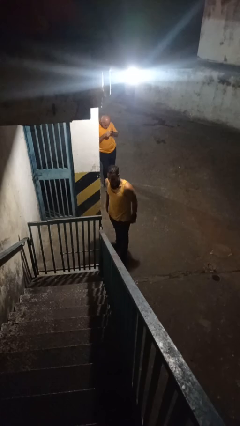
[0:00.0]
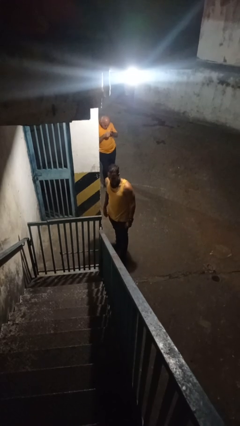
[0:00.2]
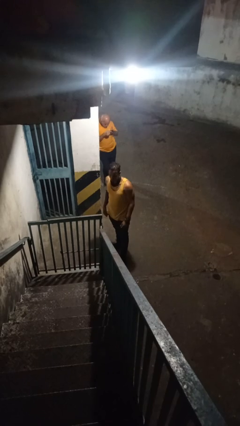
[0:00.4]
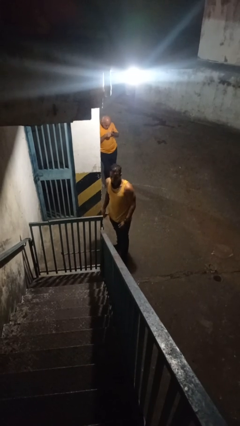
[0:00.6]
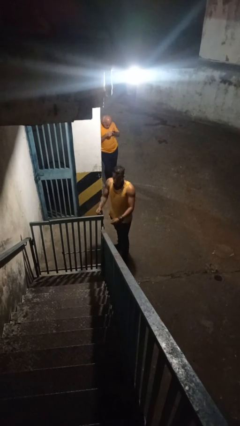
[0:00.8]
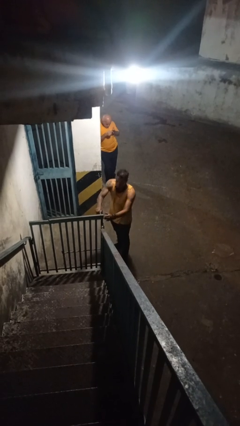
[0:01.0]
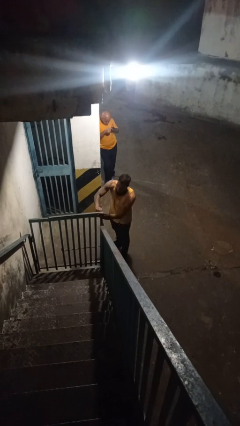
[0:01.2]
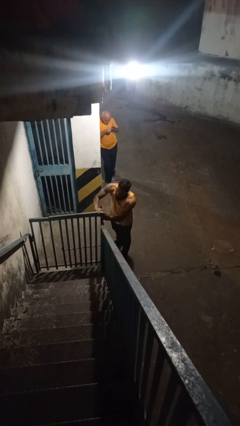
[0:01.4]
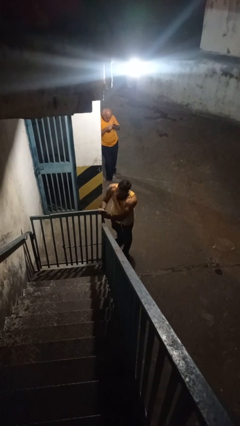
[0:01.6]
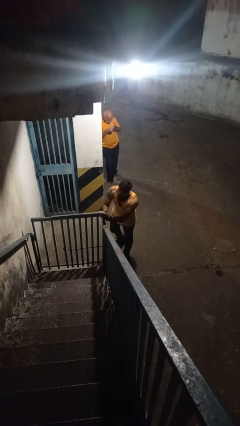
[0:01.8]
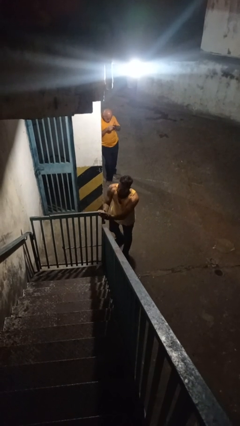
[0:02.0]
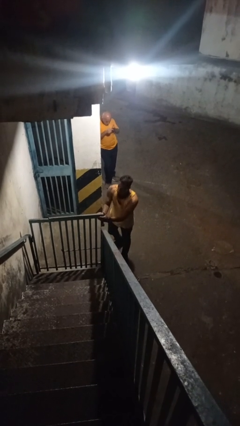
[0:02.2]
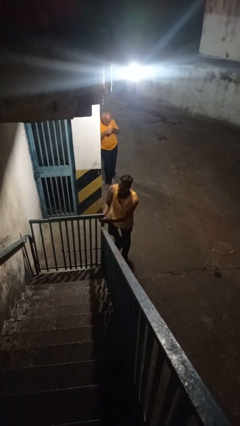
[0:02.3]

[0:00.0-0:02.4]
person unlocks door with keys

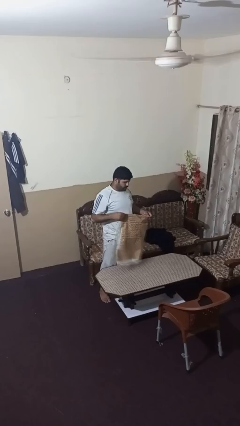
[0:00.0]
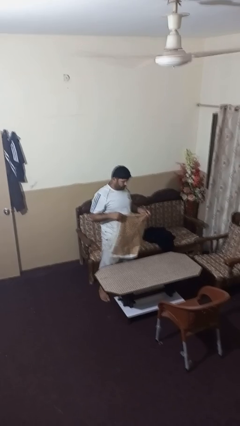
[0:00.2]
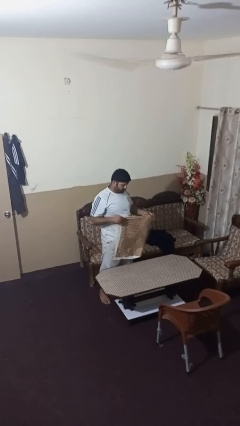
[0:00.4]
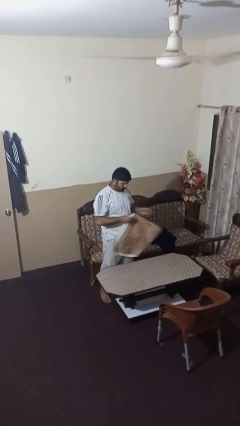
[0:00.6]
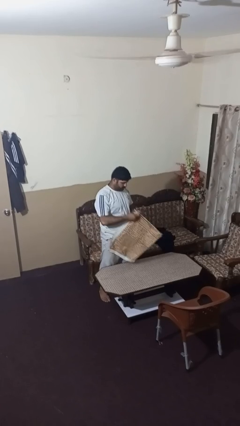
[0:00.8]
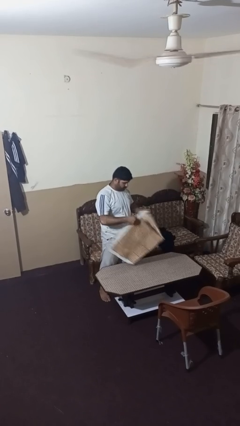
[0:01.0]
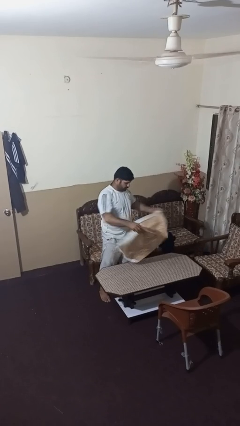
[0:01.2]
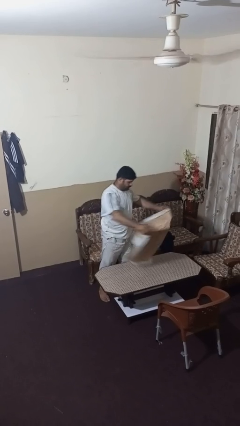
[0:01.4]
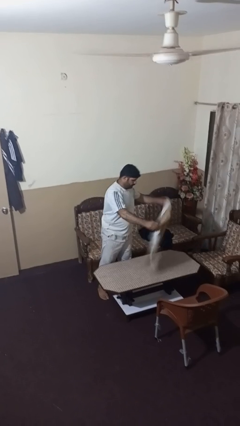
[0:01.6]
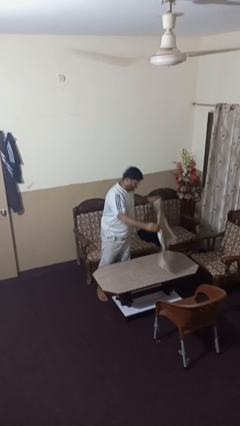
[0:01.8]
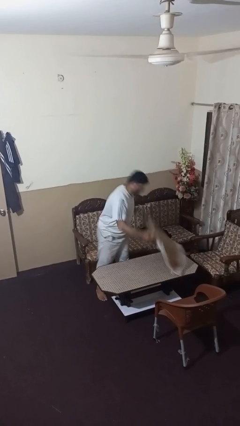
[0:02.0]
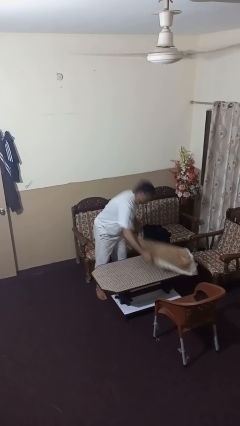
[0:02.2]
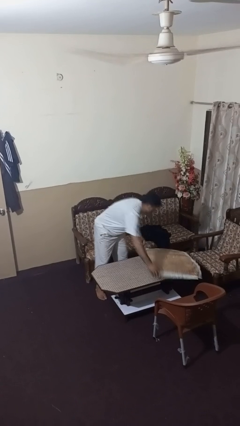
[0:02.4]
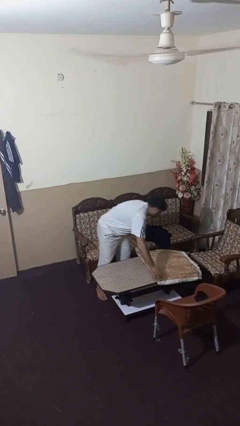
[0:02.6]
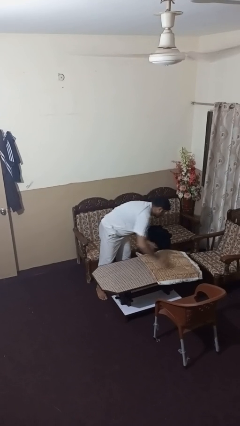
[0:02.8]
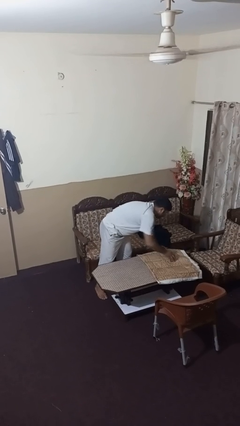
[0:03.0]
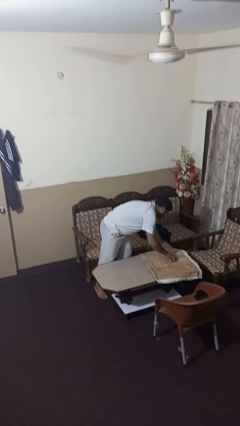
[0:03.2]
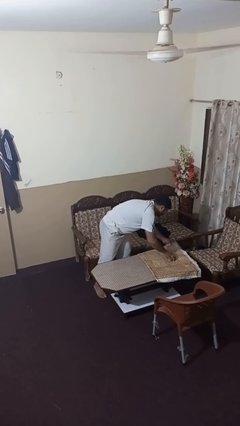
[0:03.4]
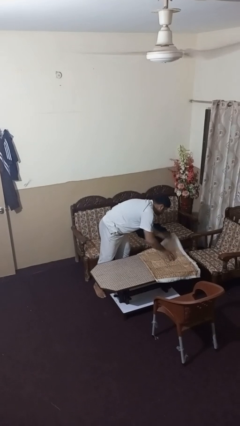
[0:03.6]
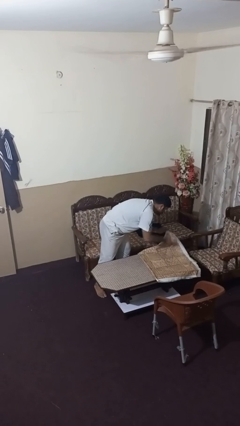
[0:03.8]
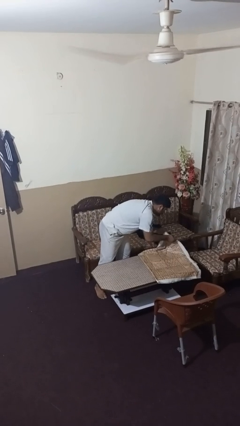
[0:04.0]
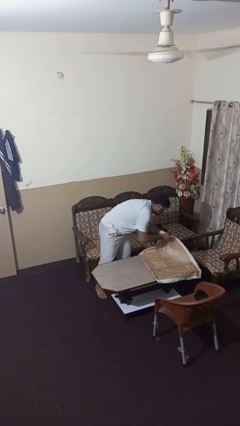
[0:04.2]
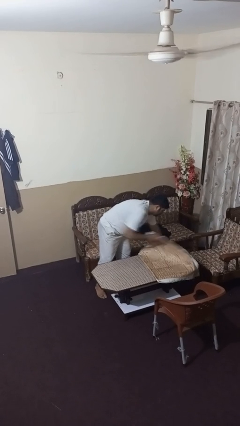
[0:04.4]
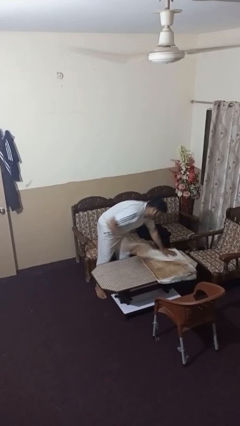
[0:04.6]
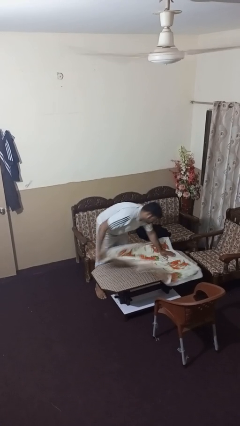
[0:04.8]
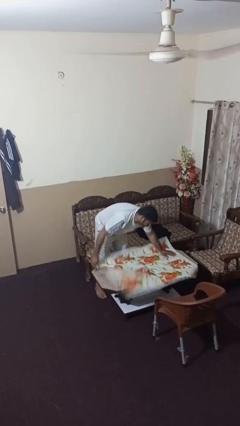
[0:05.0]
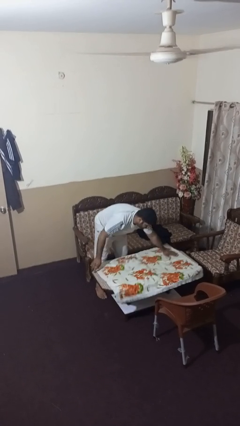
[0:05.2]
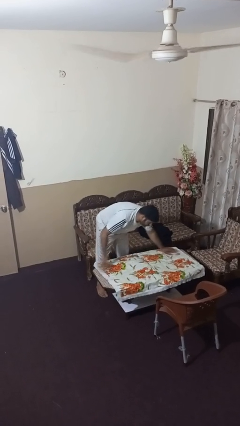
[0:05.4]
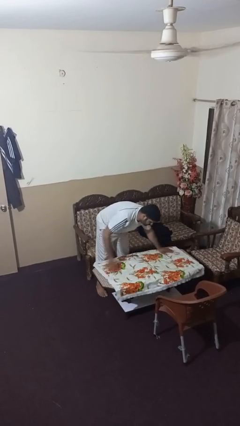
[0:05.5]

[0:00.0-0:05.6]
person spreads tablecloth

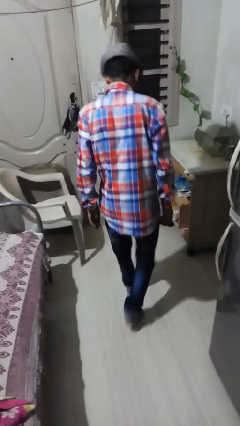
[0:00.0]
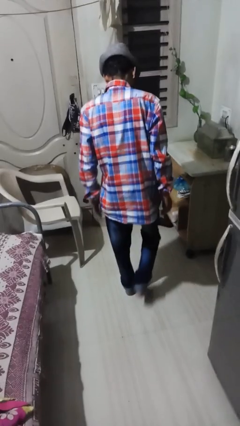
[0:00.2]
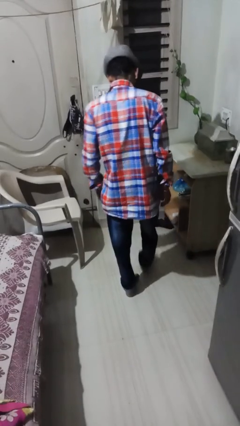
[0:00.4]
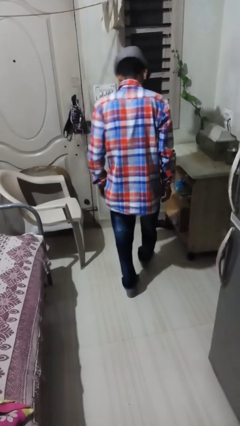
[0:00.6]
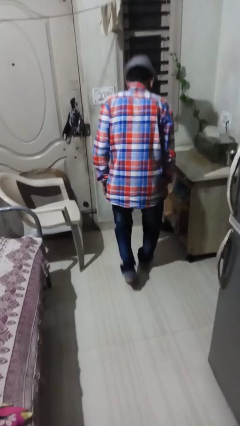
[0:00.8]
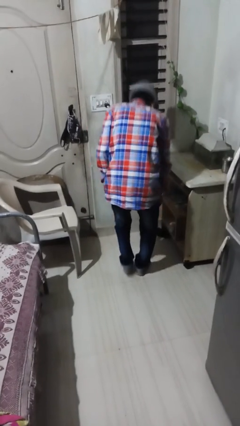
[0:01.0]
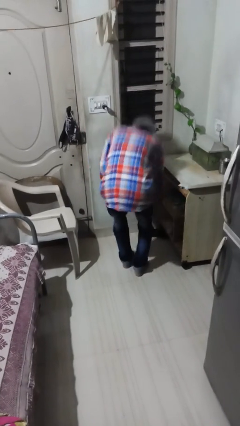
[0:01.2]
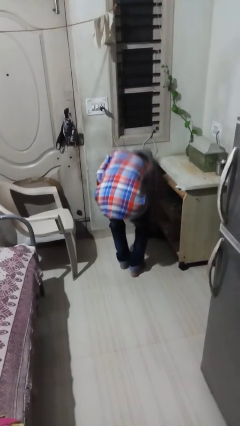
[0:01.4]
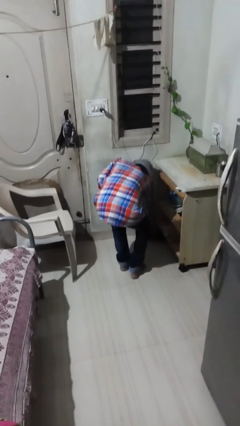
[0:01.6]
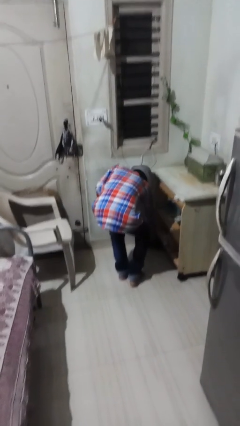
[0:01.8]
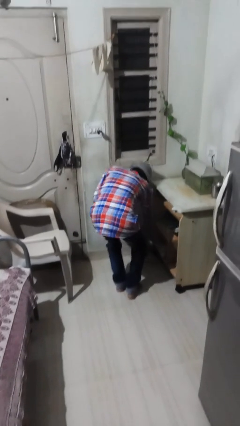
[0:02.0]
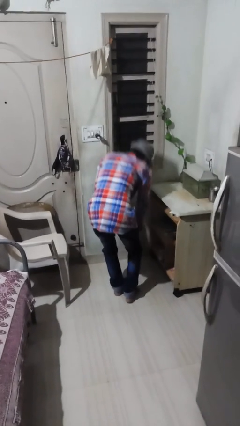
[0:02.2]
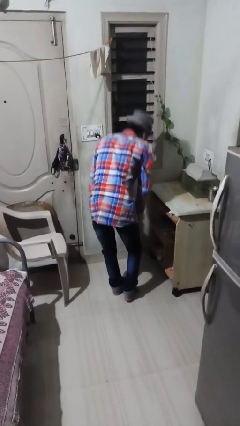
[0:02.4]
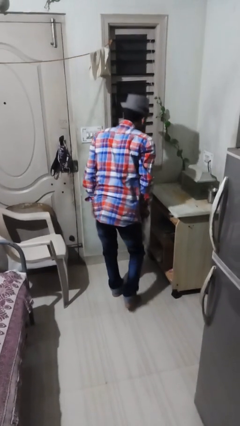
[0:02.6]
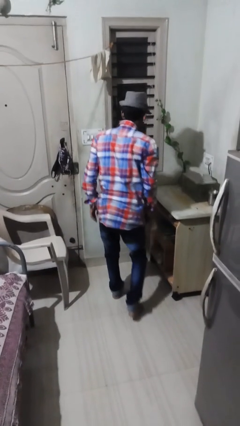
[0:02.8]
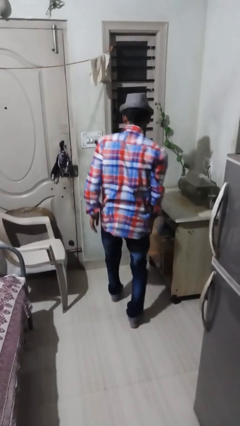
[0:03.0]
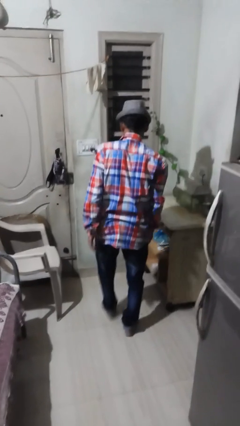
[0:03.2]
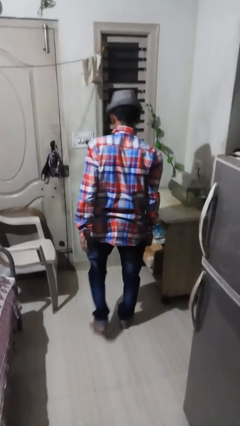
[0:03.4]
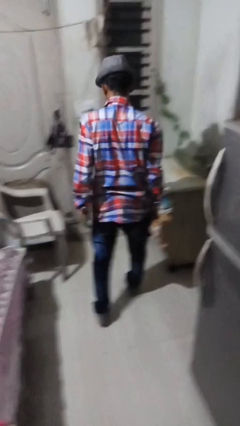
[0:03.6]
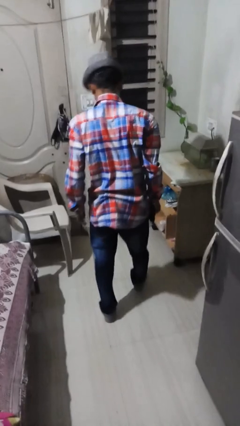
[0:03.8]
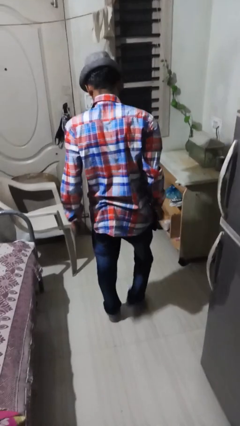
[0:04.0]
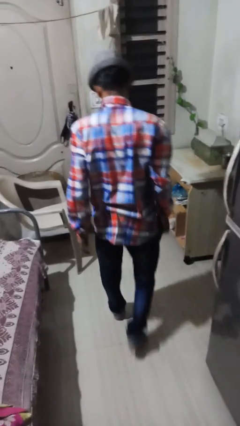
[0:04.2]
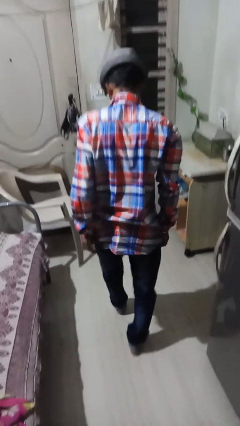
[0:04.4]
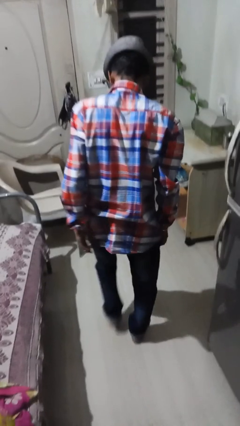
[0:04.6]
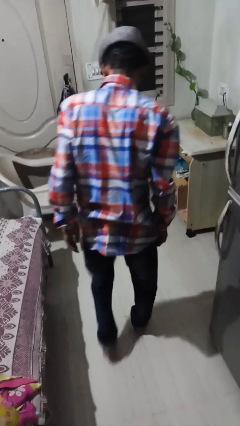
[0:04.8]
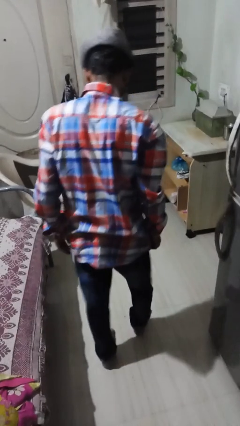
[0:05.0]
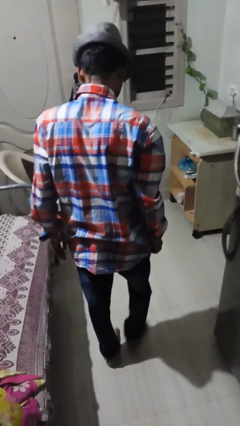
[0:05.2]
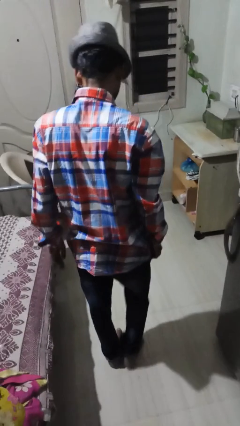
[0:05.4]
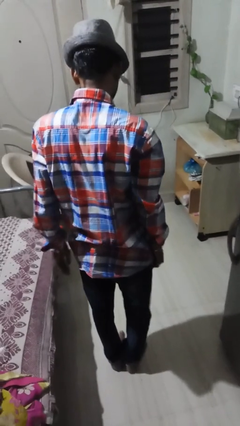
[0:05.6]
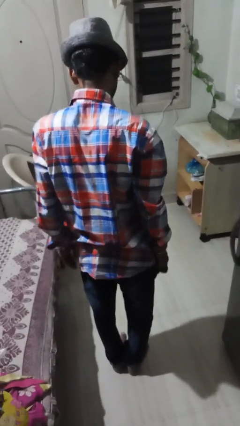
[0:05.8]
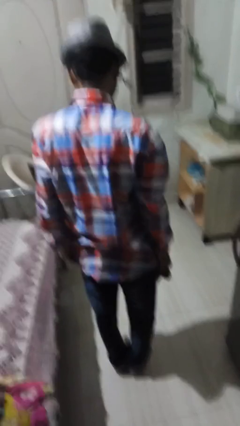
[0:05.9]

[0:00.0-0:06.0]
person picks up object from floor

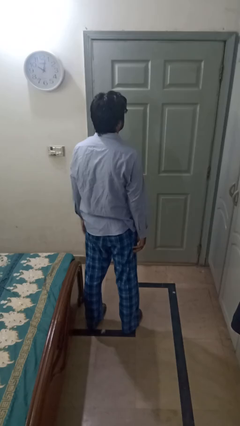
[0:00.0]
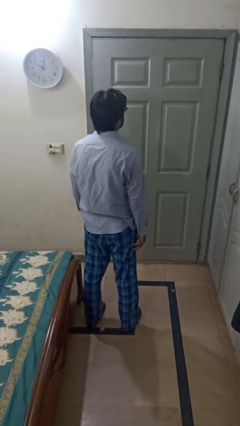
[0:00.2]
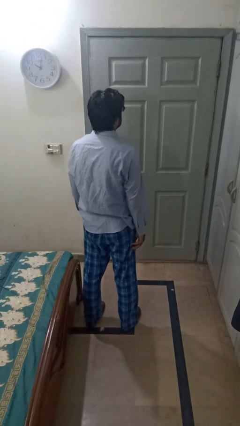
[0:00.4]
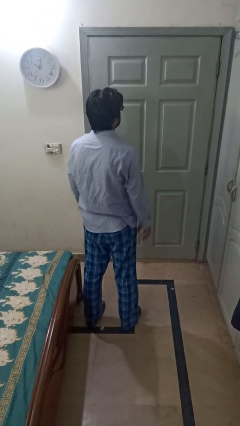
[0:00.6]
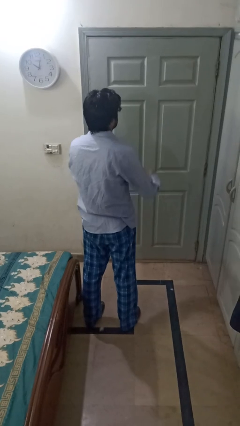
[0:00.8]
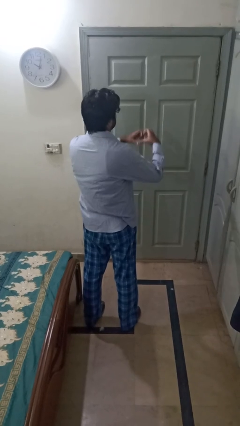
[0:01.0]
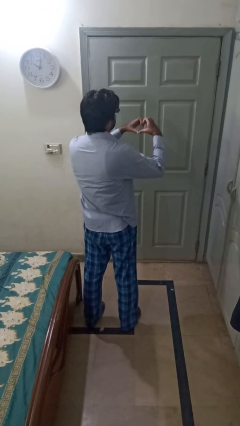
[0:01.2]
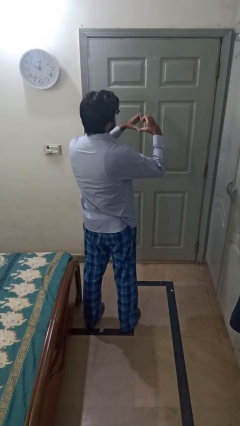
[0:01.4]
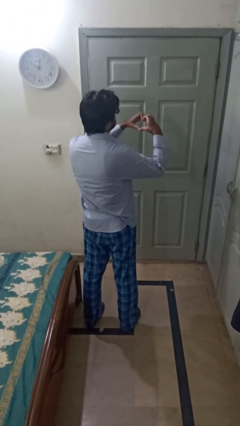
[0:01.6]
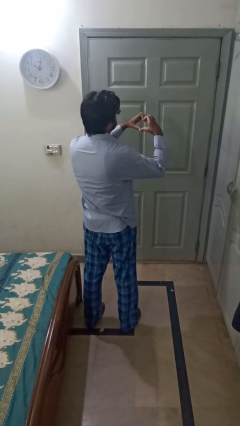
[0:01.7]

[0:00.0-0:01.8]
person gestures heart

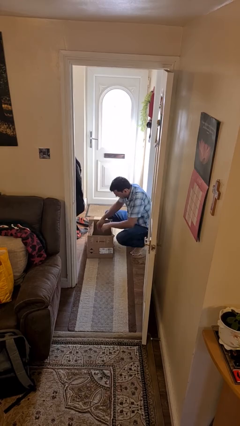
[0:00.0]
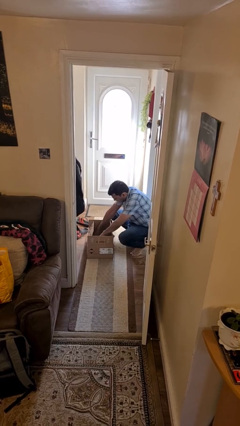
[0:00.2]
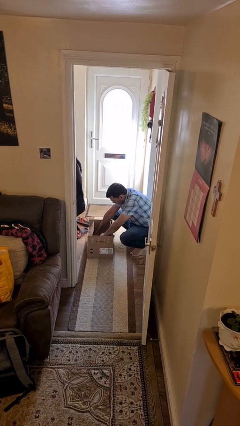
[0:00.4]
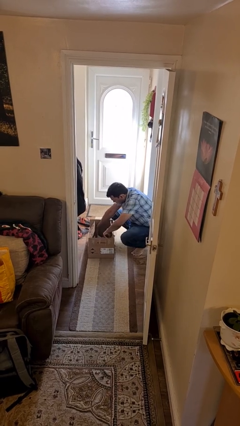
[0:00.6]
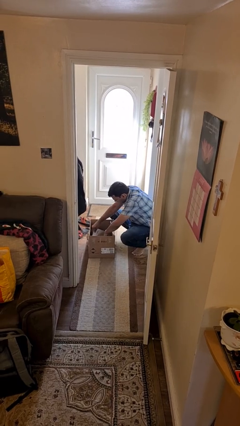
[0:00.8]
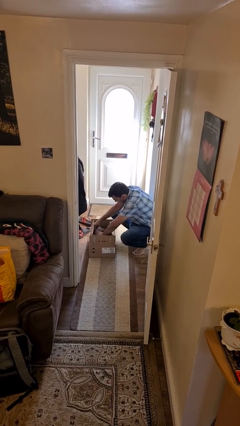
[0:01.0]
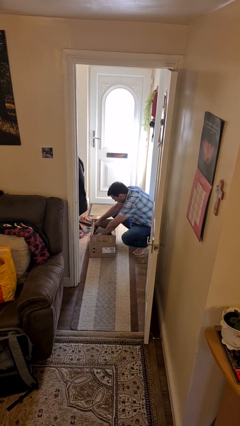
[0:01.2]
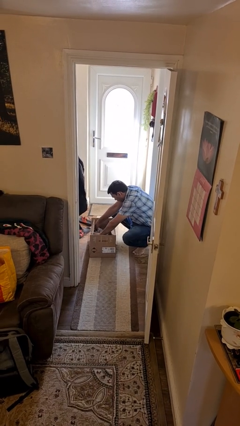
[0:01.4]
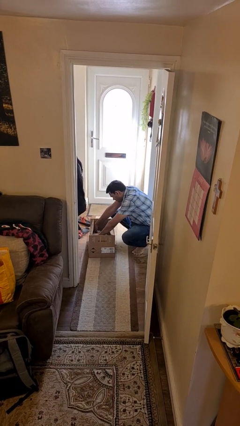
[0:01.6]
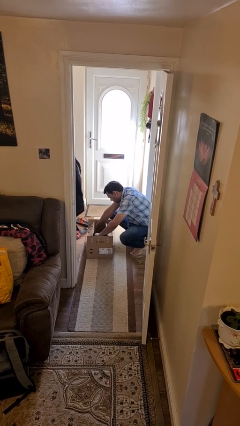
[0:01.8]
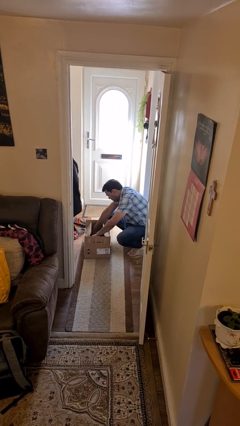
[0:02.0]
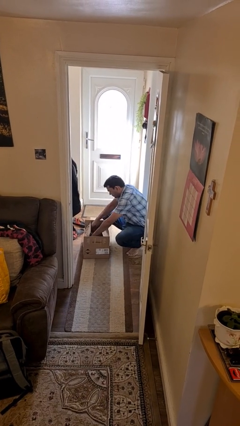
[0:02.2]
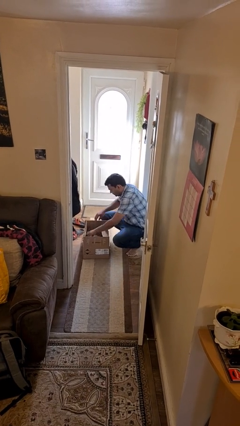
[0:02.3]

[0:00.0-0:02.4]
person searches in box
